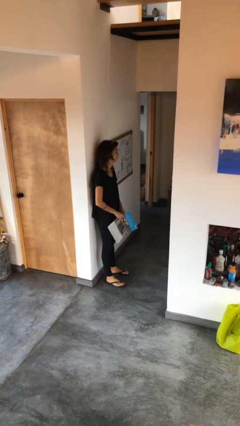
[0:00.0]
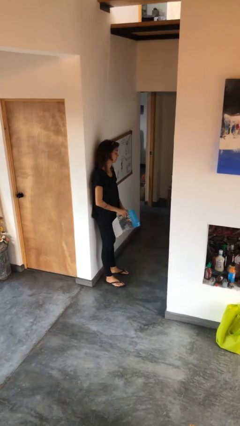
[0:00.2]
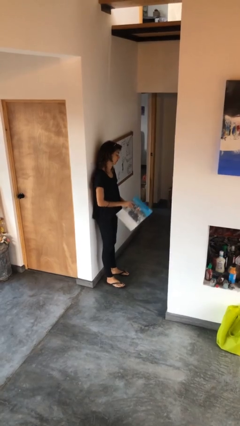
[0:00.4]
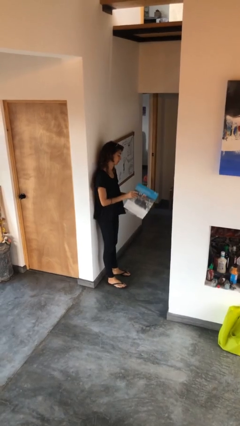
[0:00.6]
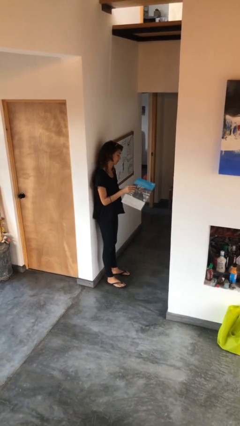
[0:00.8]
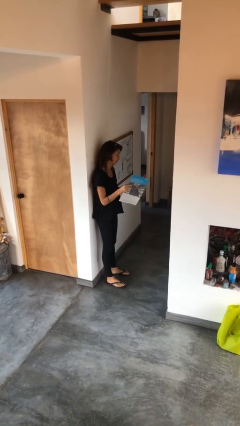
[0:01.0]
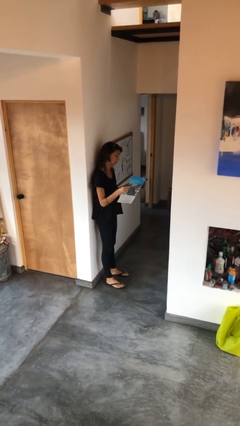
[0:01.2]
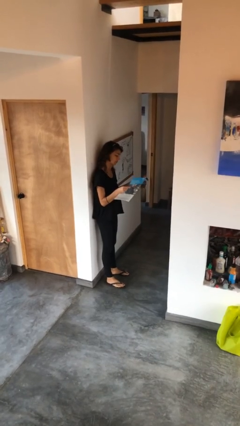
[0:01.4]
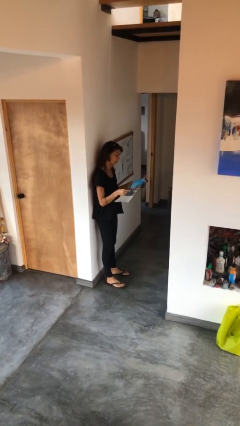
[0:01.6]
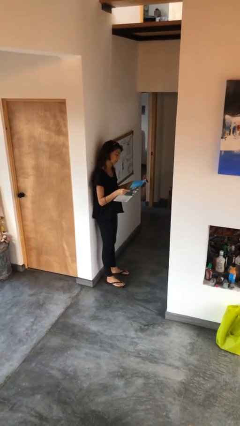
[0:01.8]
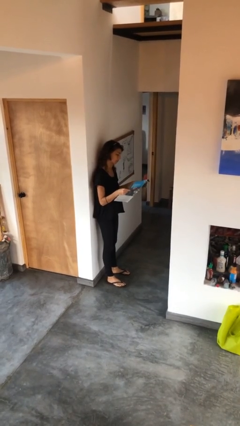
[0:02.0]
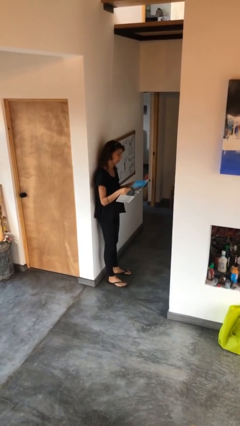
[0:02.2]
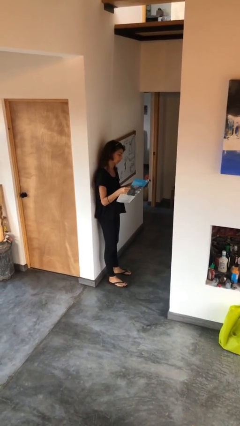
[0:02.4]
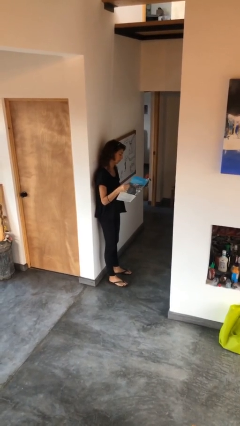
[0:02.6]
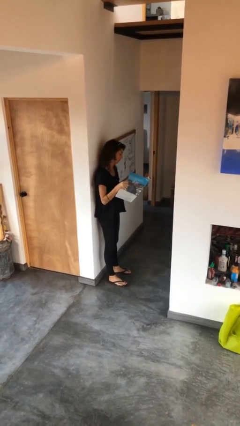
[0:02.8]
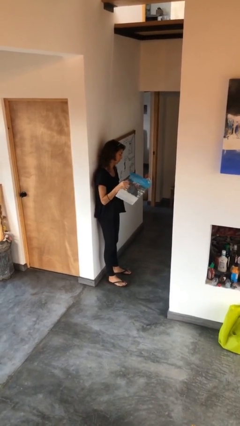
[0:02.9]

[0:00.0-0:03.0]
person reads newspaper

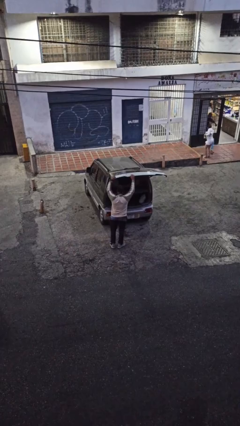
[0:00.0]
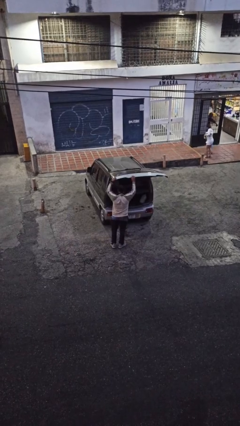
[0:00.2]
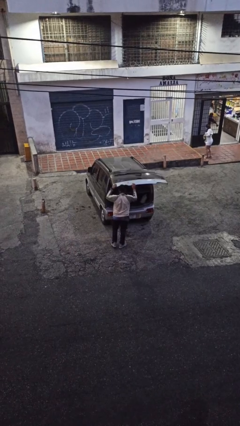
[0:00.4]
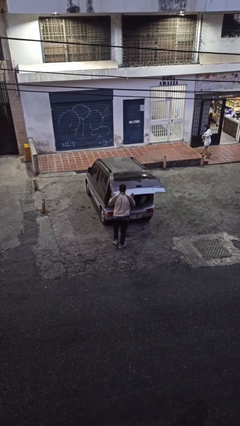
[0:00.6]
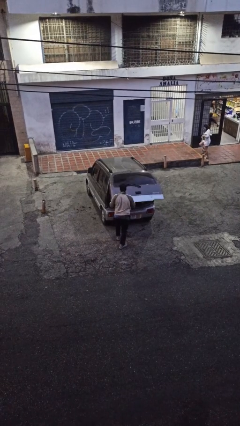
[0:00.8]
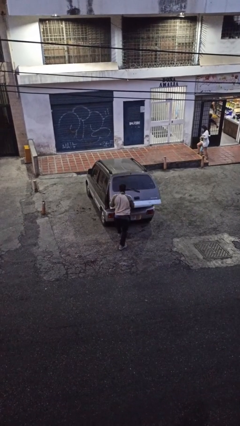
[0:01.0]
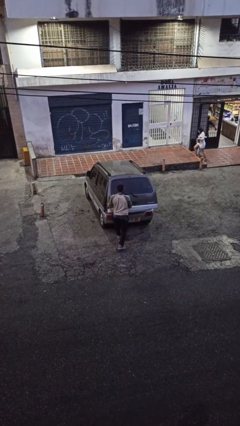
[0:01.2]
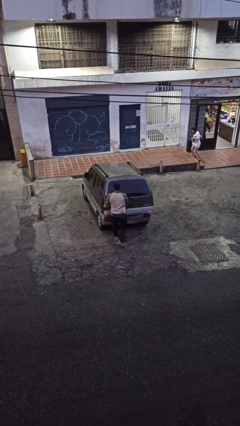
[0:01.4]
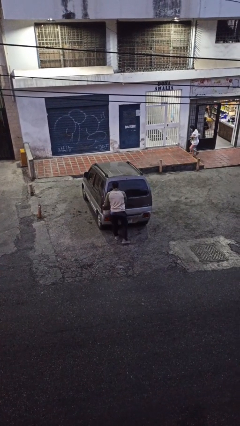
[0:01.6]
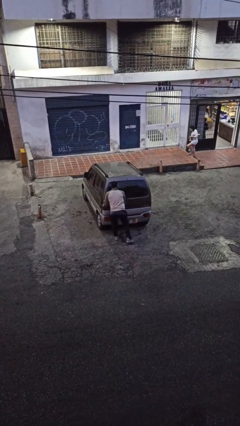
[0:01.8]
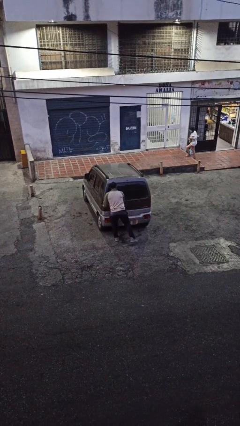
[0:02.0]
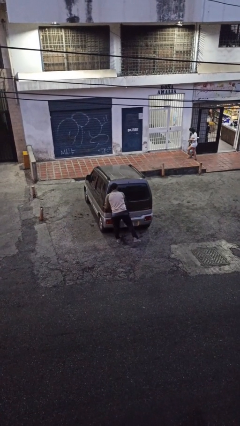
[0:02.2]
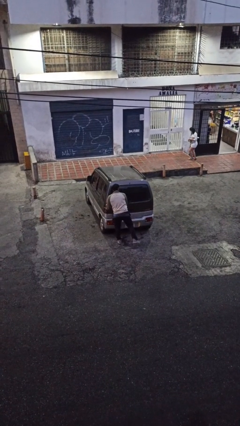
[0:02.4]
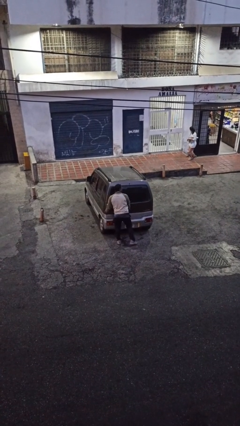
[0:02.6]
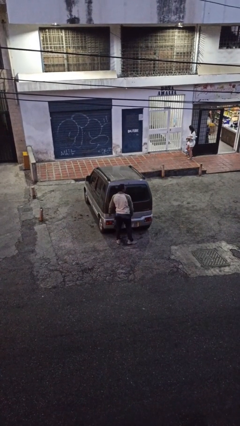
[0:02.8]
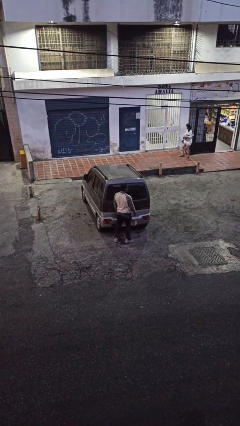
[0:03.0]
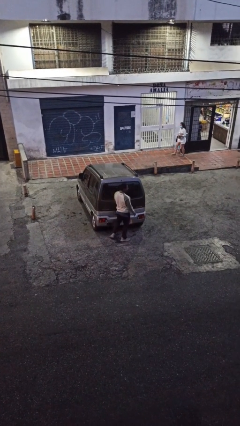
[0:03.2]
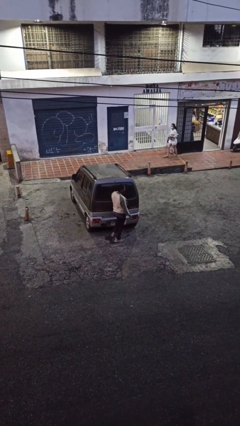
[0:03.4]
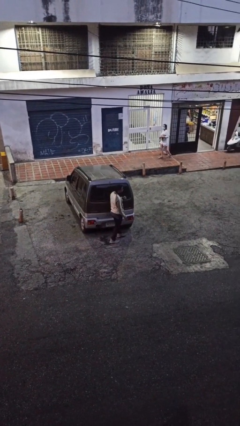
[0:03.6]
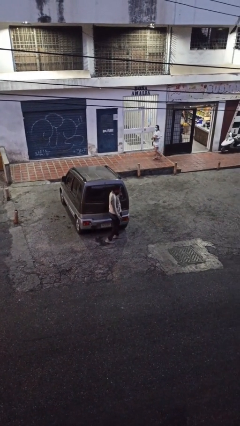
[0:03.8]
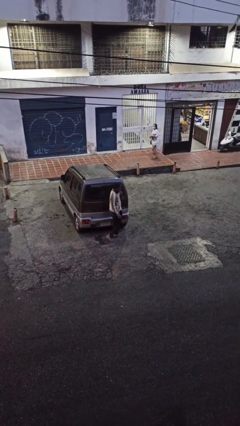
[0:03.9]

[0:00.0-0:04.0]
person closes car trunk

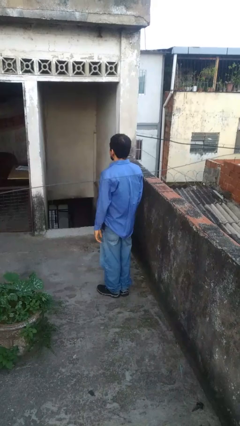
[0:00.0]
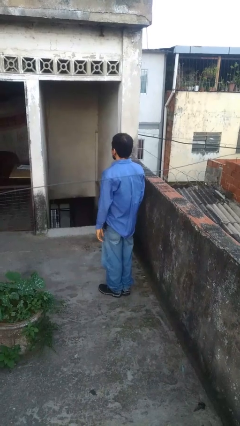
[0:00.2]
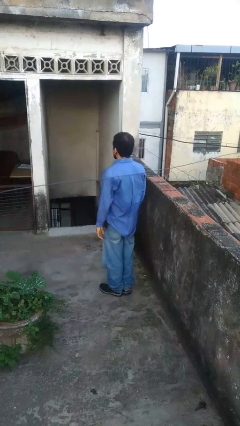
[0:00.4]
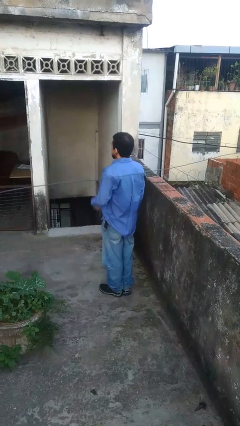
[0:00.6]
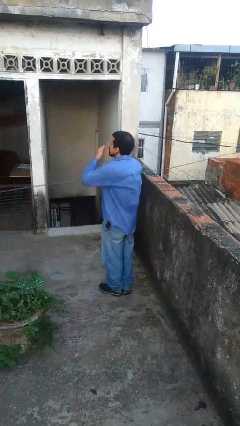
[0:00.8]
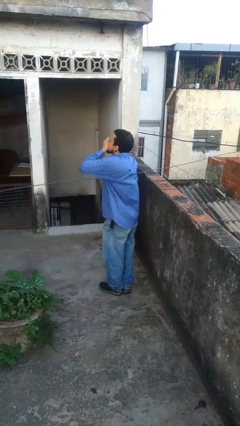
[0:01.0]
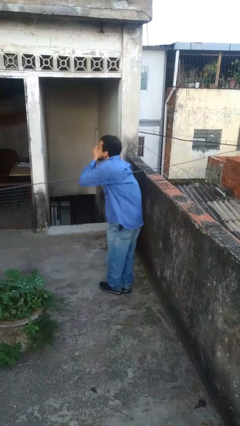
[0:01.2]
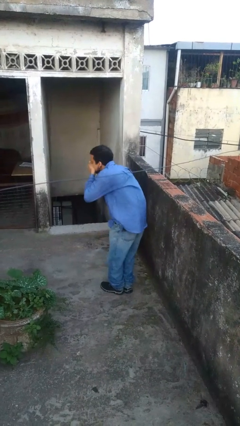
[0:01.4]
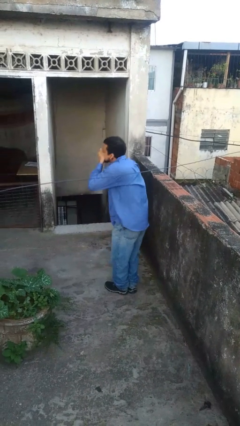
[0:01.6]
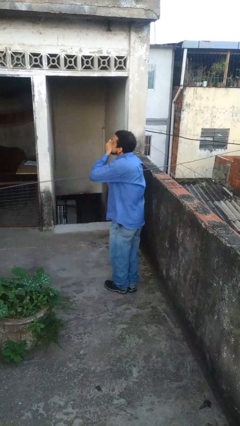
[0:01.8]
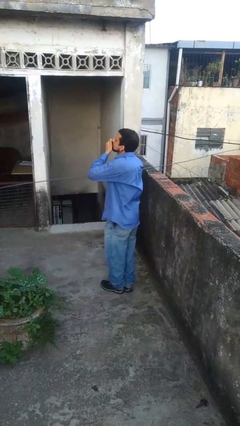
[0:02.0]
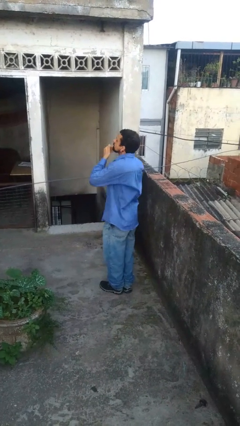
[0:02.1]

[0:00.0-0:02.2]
person sneezes into hand

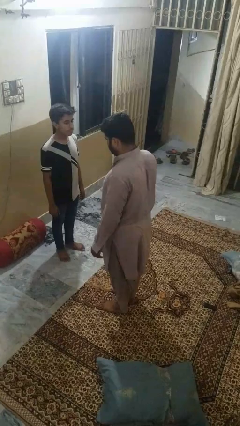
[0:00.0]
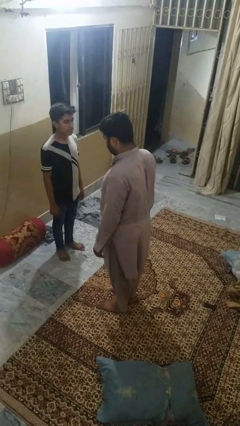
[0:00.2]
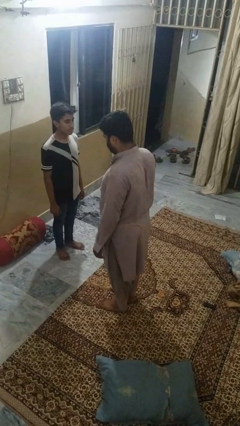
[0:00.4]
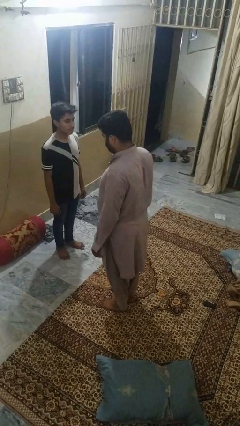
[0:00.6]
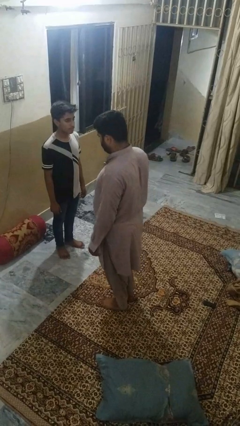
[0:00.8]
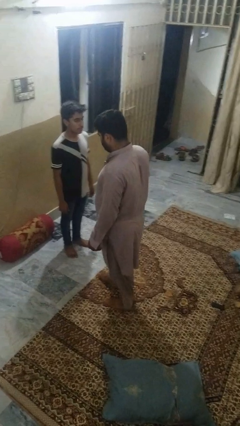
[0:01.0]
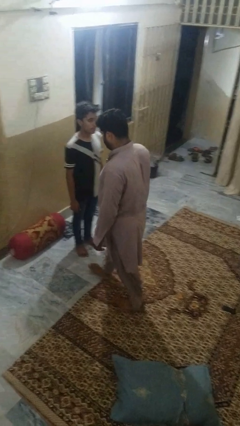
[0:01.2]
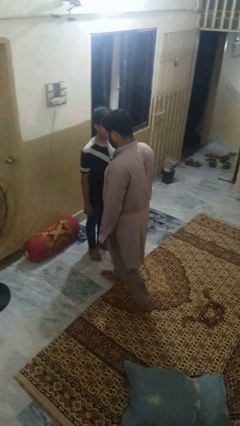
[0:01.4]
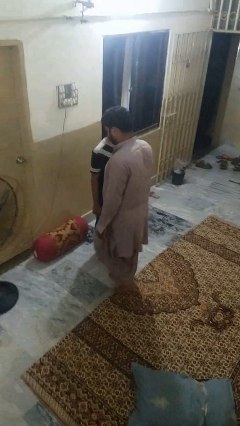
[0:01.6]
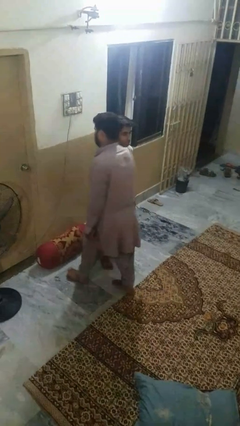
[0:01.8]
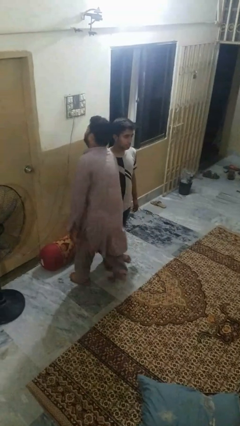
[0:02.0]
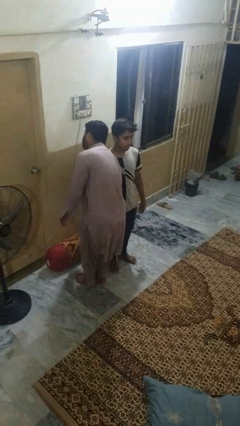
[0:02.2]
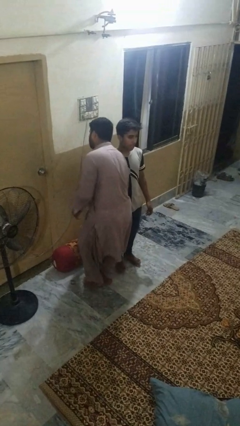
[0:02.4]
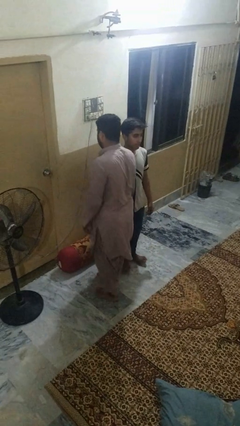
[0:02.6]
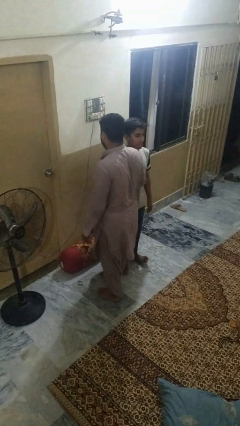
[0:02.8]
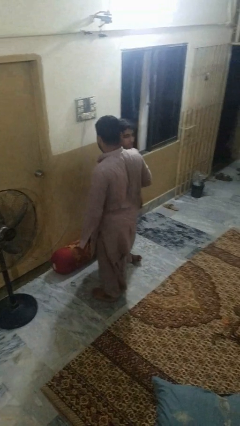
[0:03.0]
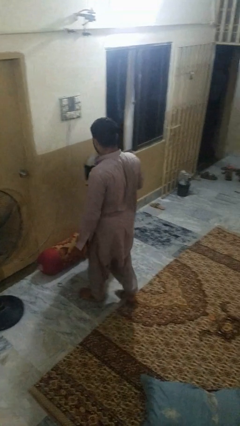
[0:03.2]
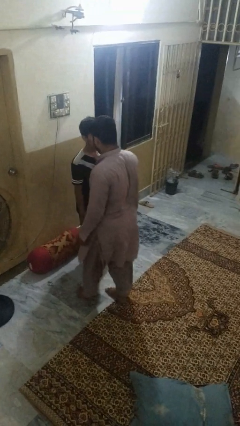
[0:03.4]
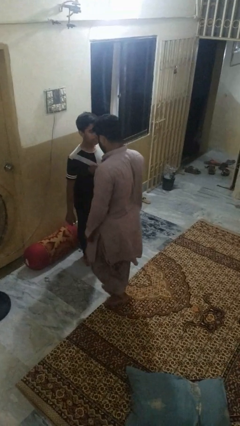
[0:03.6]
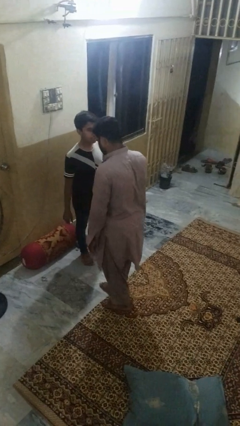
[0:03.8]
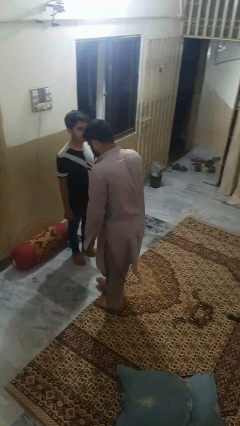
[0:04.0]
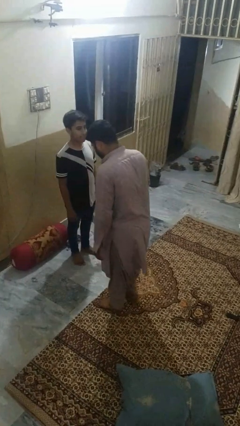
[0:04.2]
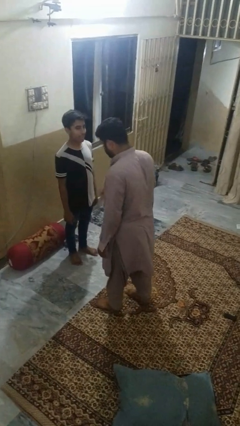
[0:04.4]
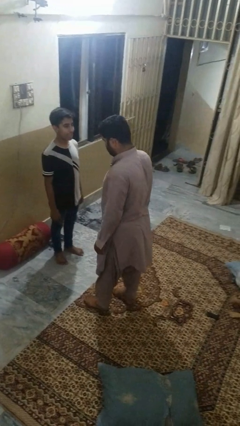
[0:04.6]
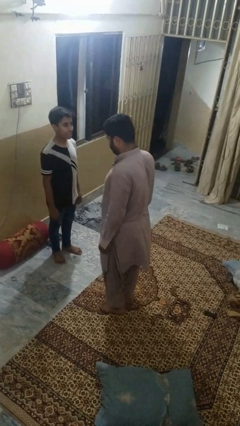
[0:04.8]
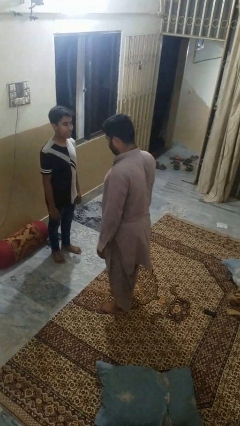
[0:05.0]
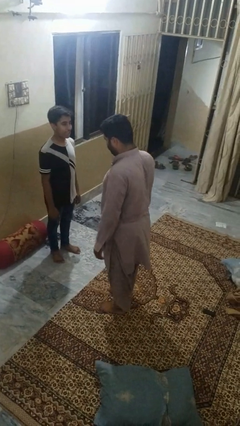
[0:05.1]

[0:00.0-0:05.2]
person bumps into person

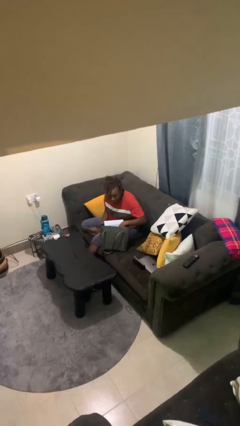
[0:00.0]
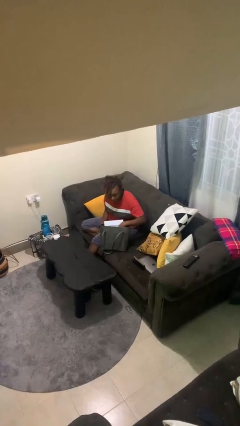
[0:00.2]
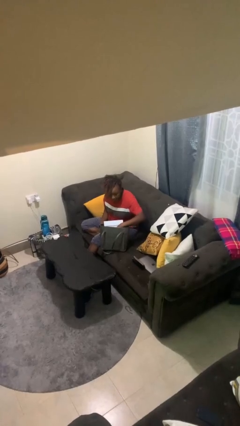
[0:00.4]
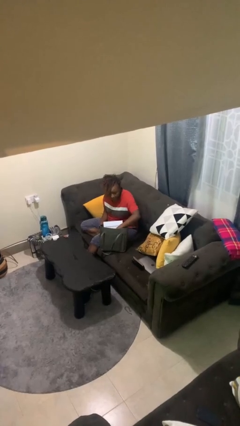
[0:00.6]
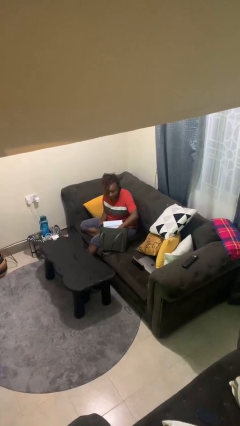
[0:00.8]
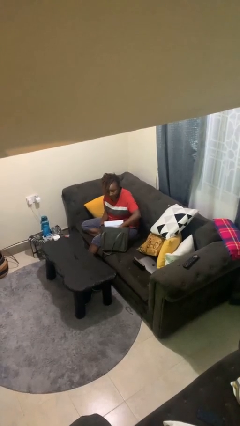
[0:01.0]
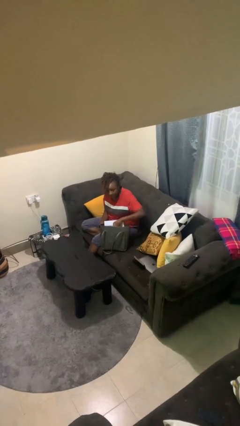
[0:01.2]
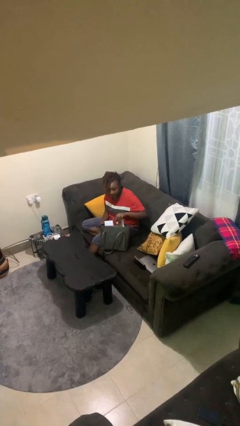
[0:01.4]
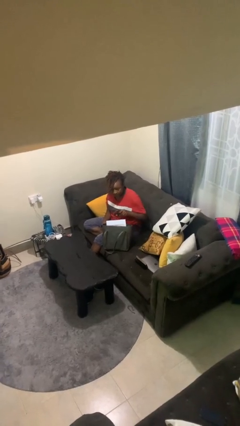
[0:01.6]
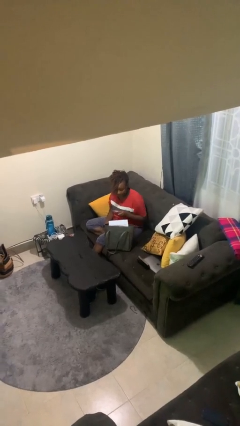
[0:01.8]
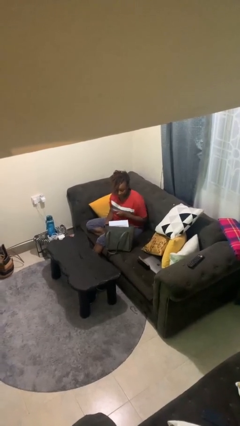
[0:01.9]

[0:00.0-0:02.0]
person takes object from purse

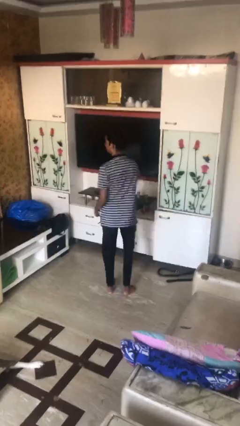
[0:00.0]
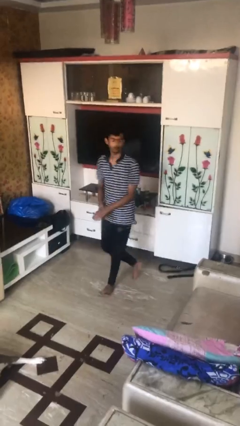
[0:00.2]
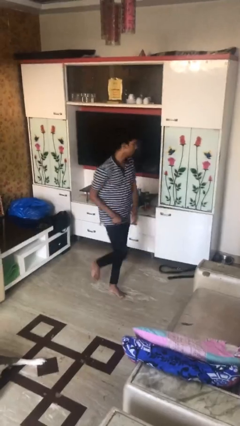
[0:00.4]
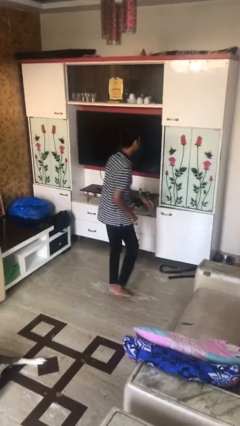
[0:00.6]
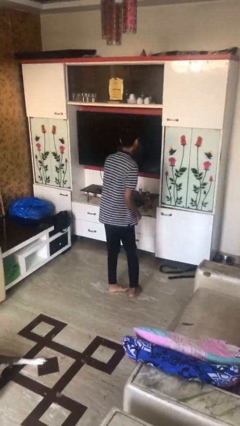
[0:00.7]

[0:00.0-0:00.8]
person twirls

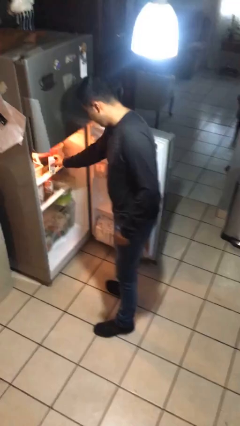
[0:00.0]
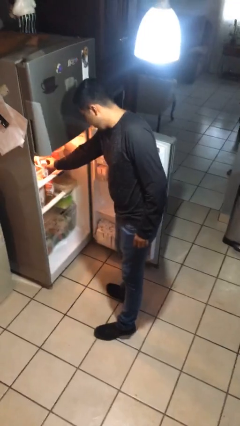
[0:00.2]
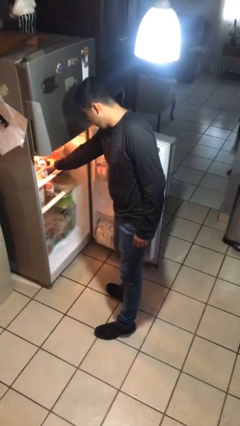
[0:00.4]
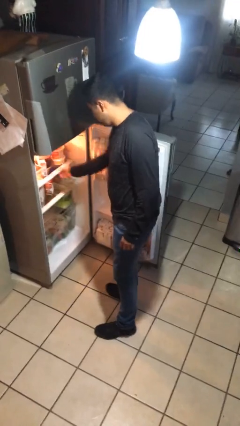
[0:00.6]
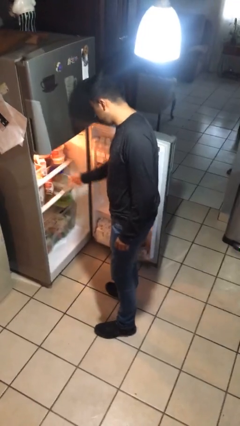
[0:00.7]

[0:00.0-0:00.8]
person takes object from refrigerator
